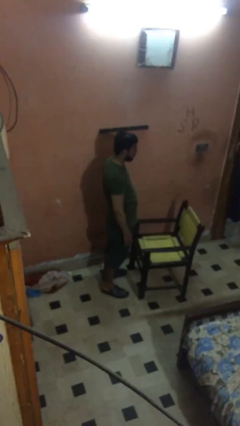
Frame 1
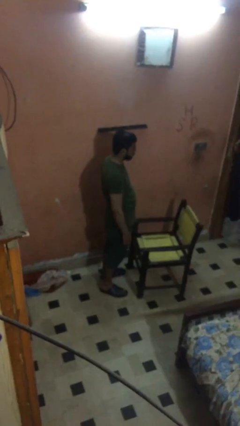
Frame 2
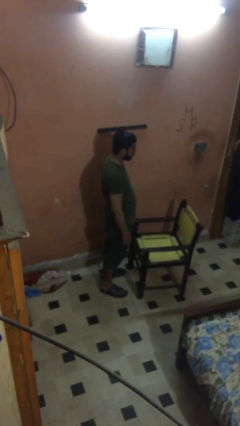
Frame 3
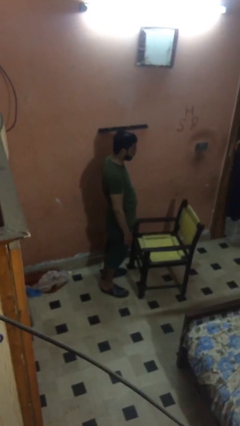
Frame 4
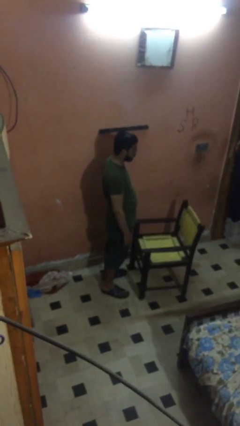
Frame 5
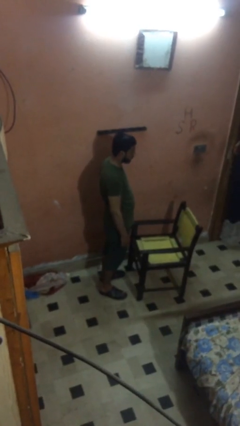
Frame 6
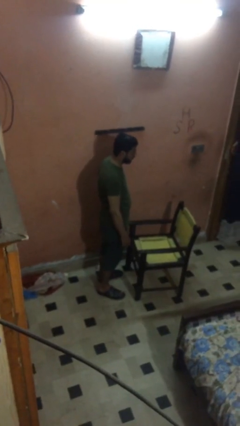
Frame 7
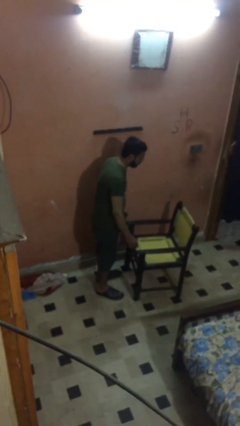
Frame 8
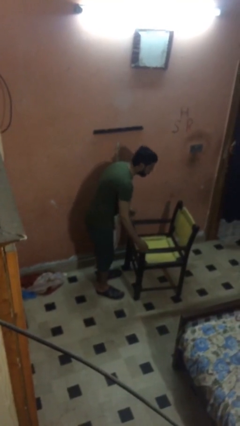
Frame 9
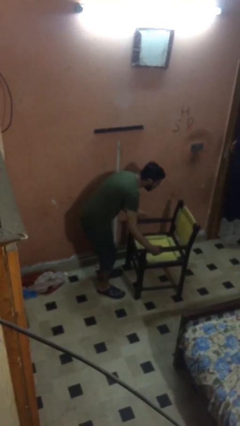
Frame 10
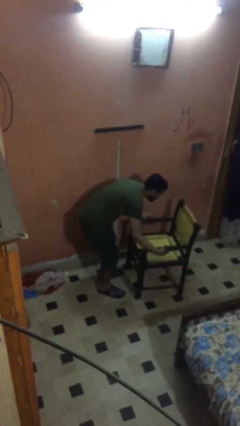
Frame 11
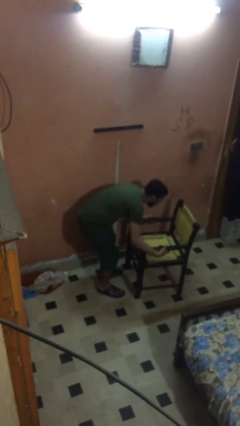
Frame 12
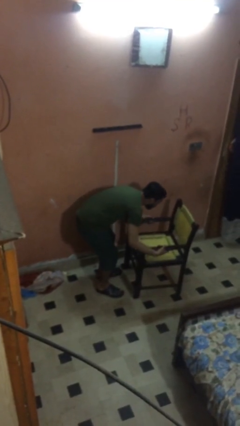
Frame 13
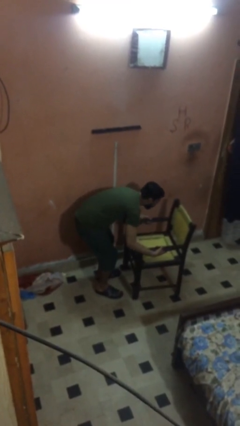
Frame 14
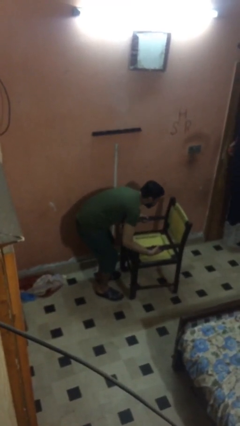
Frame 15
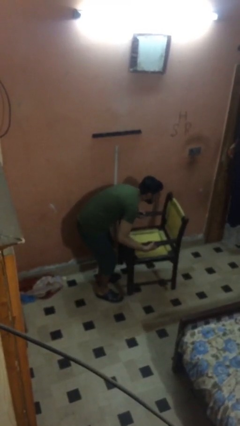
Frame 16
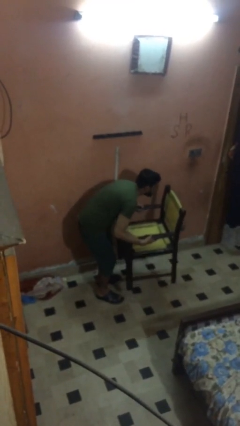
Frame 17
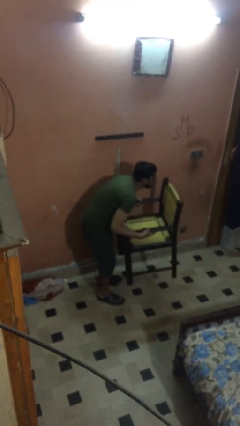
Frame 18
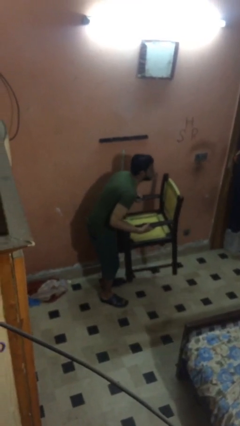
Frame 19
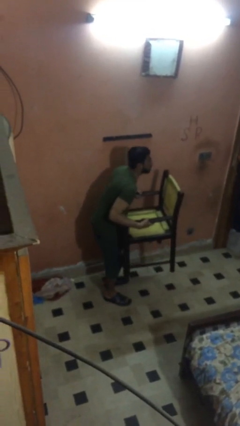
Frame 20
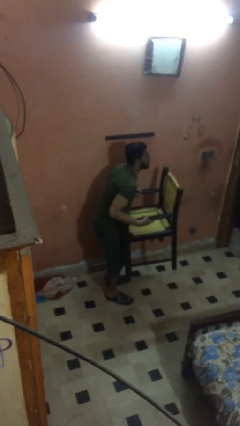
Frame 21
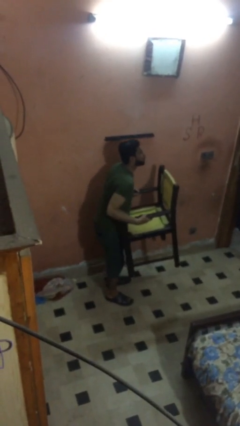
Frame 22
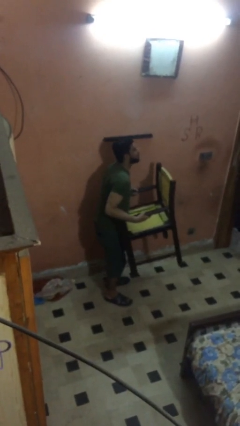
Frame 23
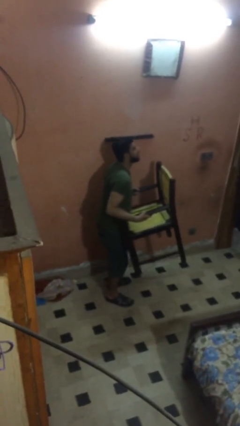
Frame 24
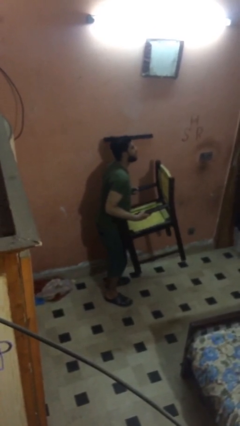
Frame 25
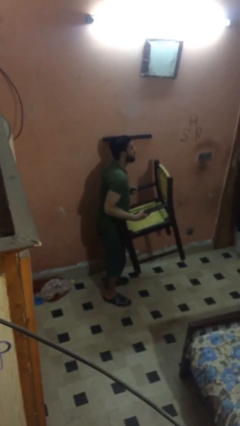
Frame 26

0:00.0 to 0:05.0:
person picks up object from floor

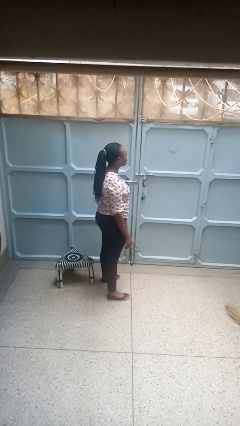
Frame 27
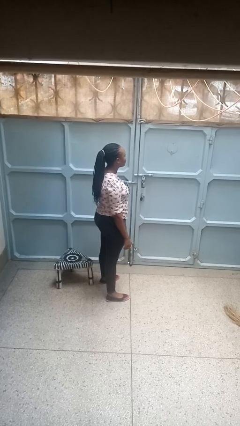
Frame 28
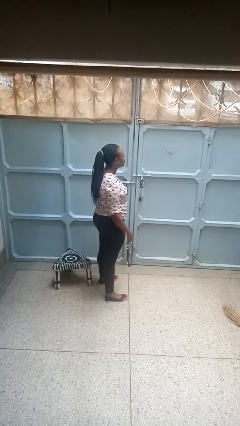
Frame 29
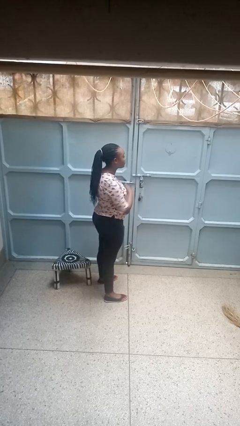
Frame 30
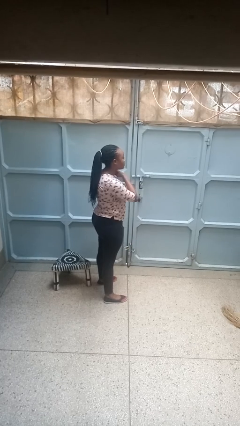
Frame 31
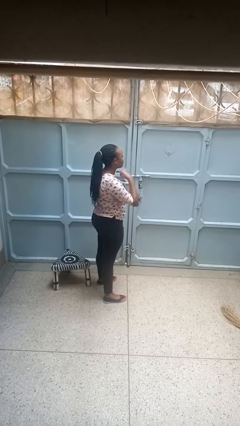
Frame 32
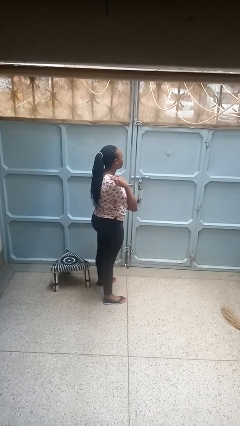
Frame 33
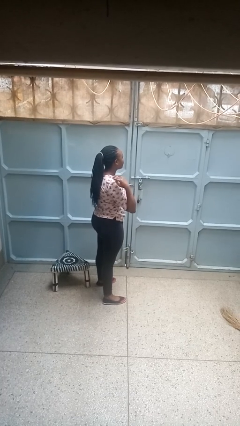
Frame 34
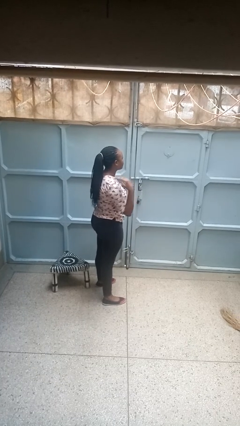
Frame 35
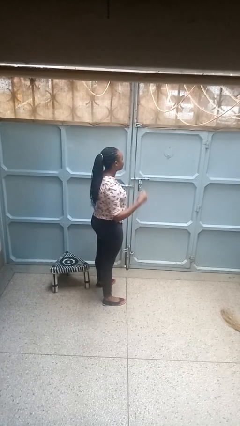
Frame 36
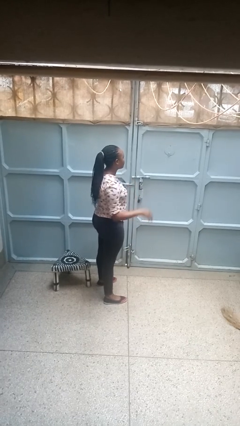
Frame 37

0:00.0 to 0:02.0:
person gestures cut

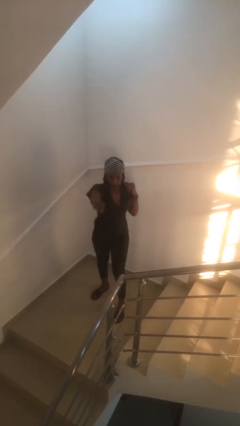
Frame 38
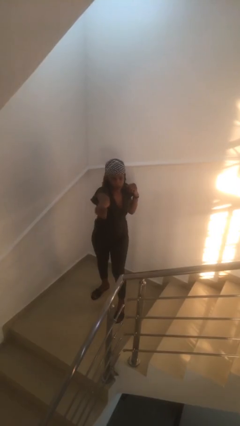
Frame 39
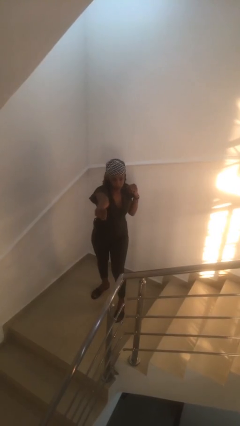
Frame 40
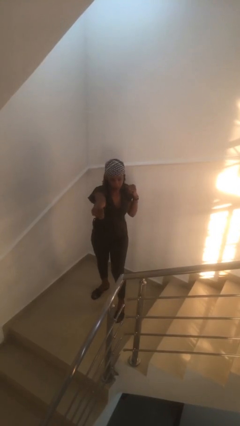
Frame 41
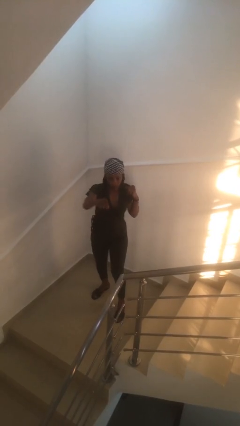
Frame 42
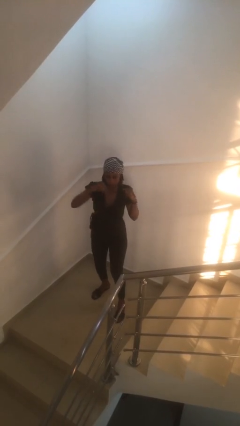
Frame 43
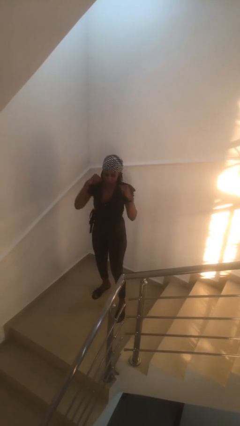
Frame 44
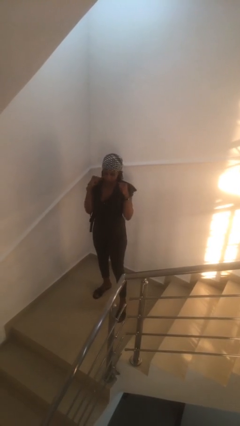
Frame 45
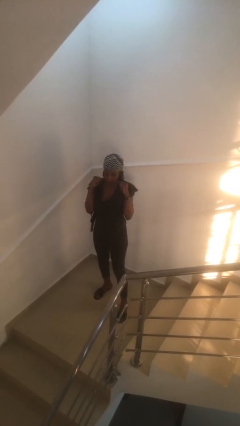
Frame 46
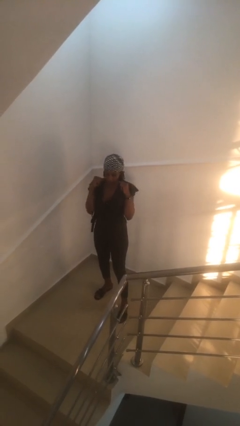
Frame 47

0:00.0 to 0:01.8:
person punches

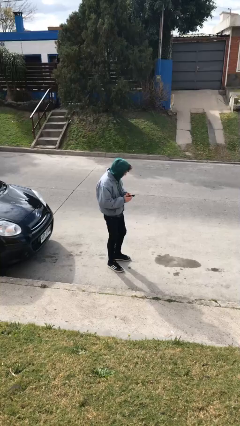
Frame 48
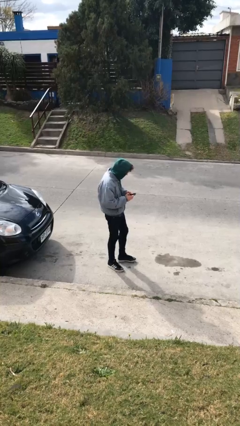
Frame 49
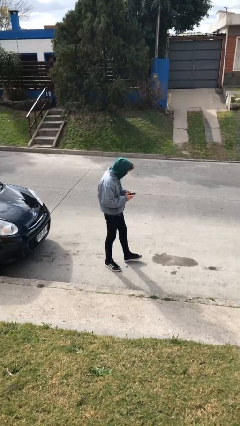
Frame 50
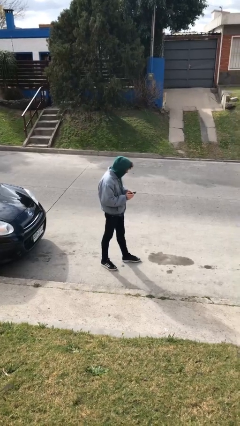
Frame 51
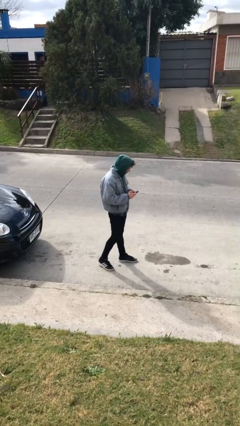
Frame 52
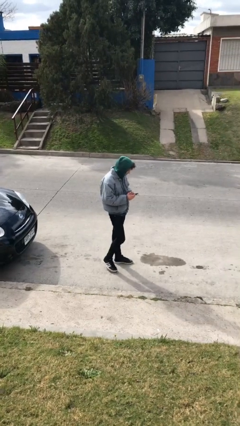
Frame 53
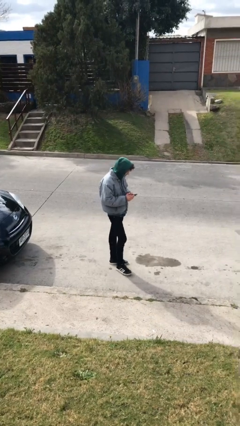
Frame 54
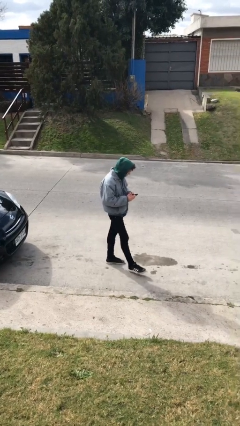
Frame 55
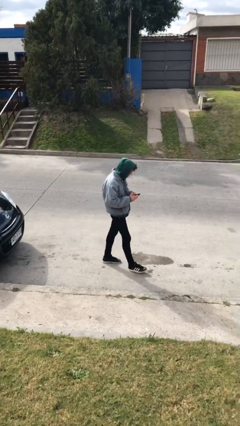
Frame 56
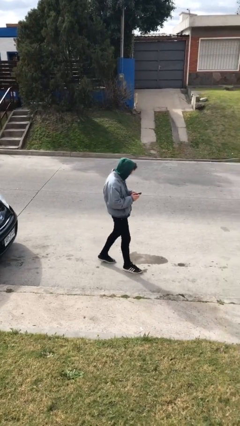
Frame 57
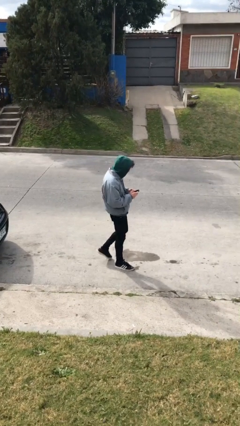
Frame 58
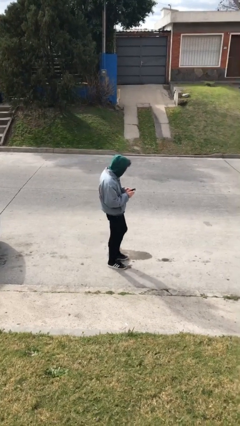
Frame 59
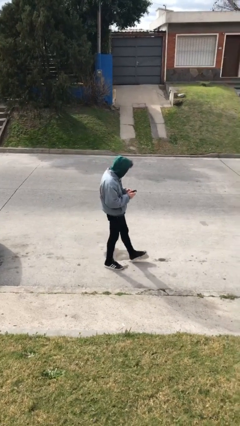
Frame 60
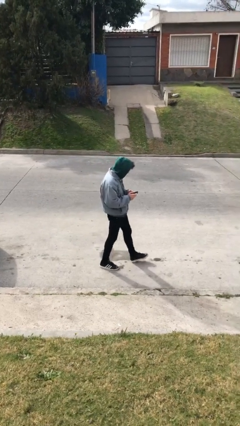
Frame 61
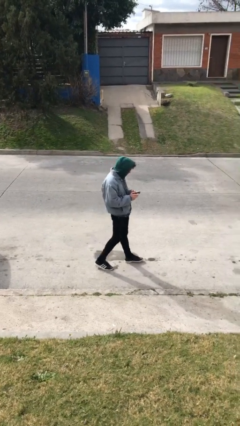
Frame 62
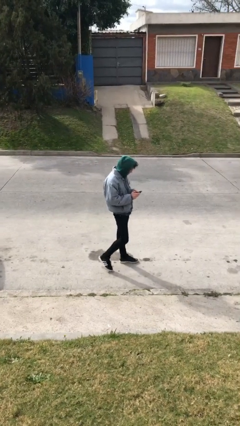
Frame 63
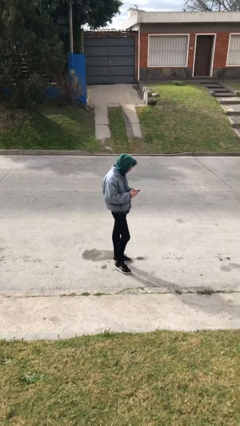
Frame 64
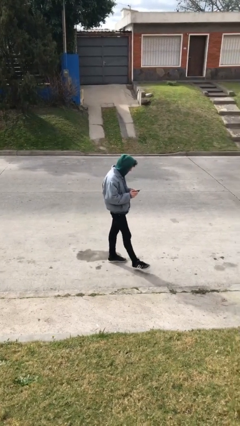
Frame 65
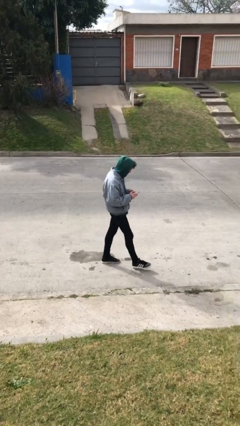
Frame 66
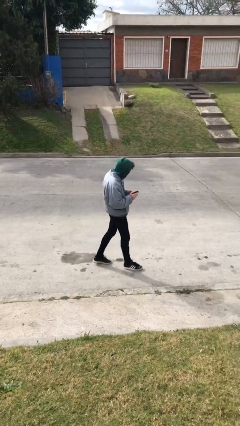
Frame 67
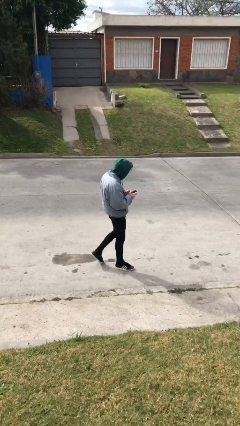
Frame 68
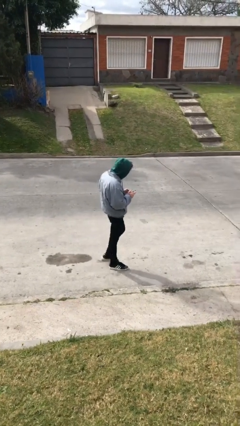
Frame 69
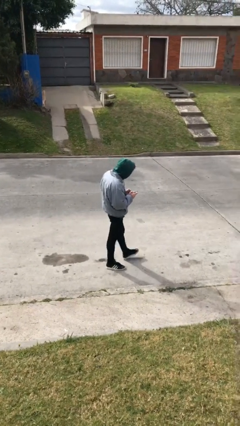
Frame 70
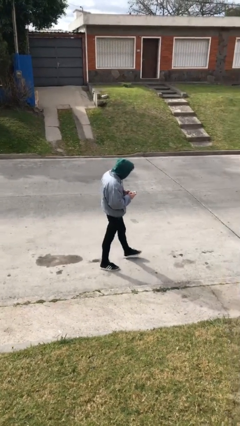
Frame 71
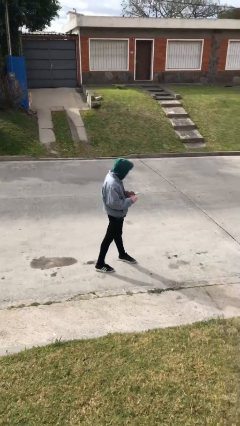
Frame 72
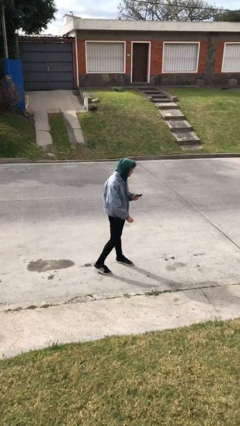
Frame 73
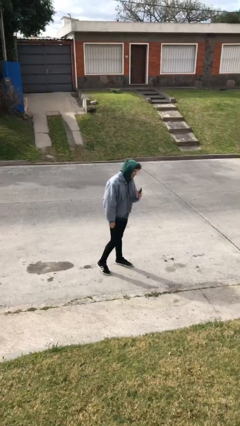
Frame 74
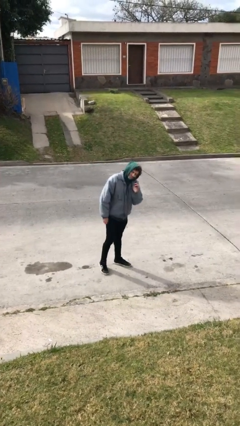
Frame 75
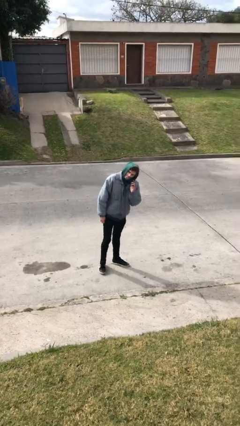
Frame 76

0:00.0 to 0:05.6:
person texts on phone

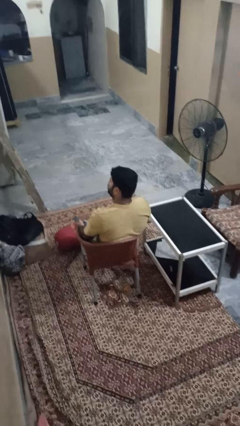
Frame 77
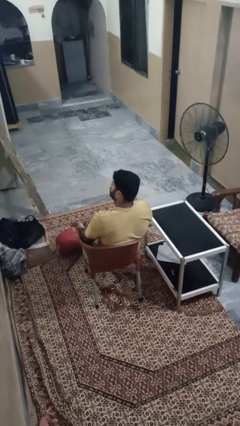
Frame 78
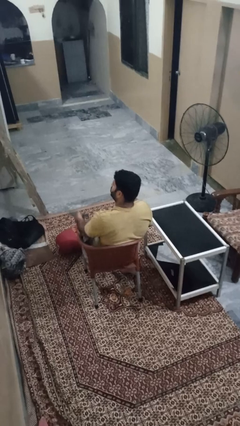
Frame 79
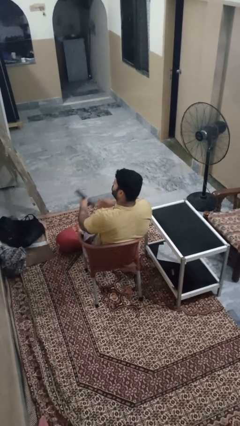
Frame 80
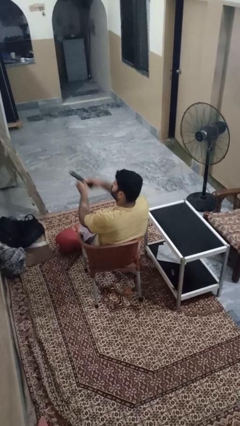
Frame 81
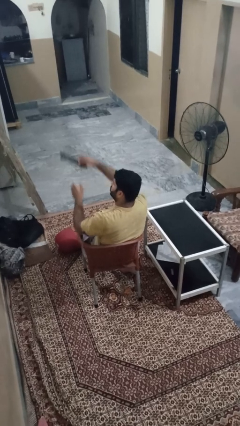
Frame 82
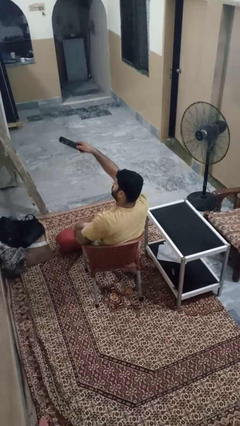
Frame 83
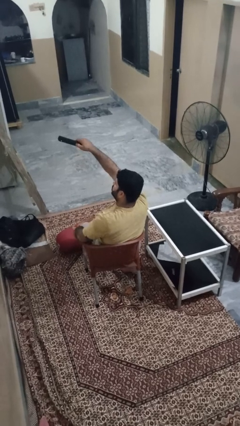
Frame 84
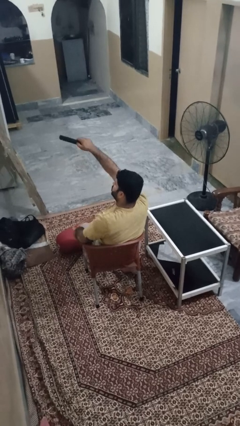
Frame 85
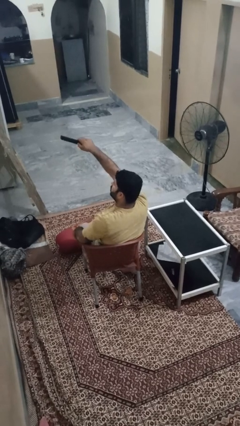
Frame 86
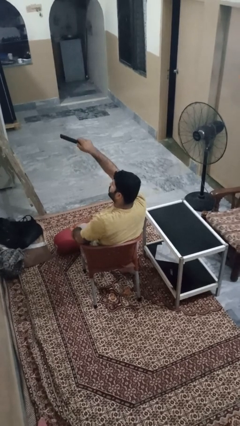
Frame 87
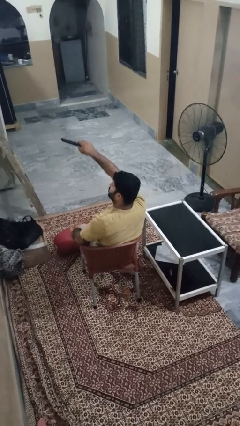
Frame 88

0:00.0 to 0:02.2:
person uses television remote

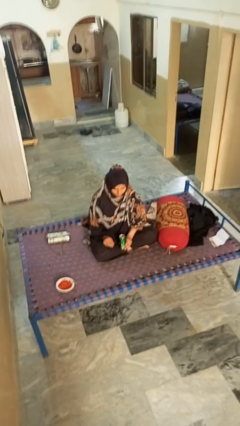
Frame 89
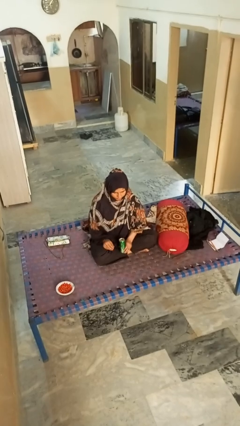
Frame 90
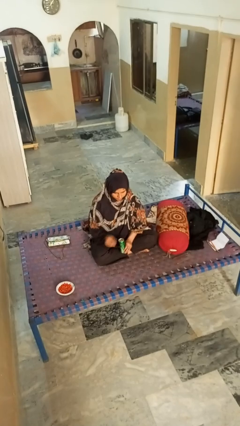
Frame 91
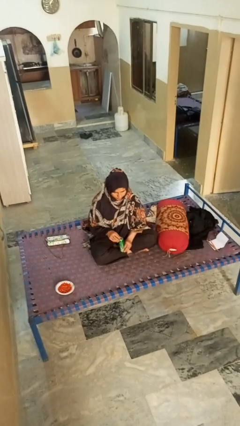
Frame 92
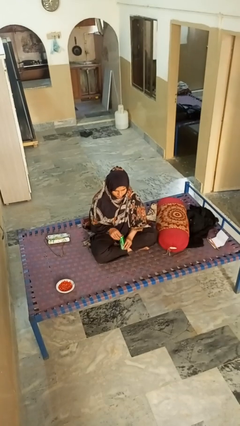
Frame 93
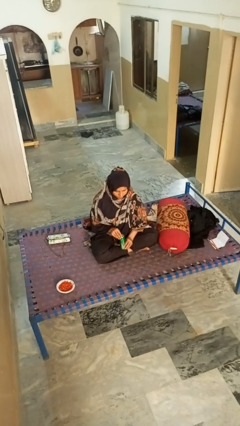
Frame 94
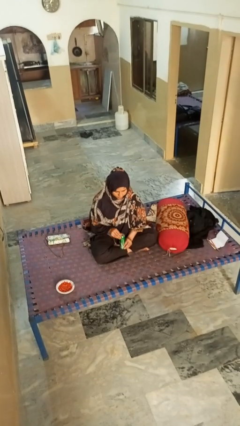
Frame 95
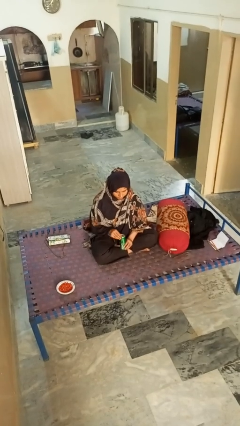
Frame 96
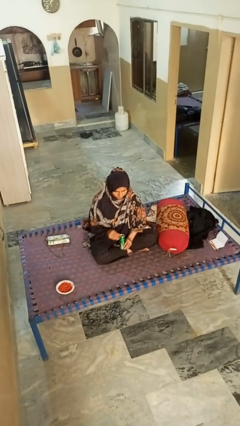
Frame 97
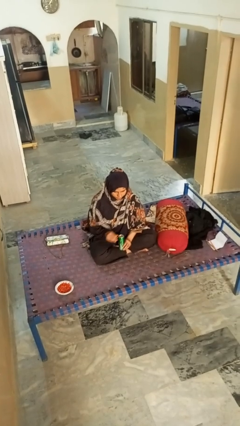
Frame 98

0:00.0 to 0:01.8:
person opens can with can opener
